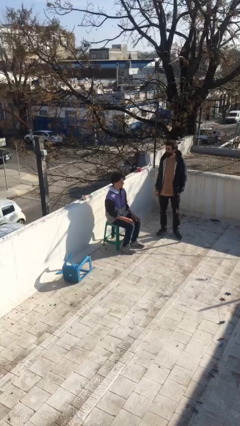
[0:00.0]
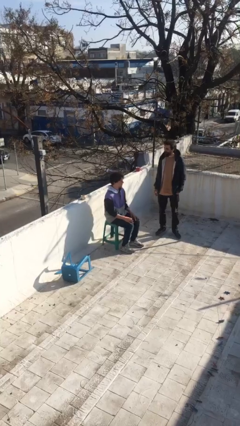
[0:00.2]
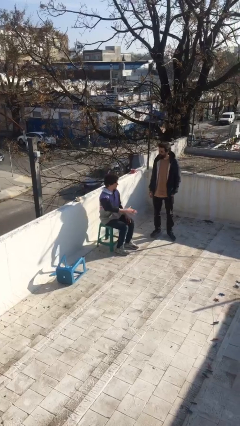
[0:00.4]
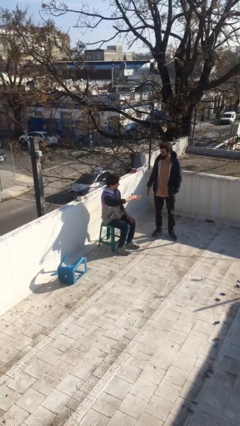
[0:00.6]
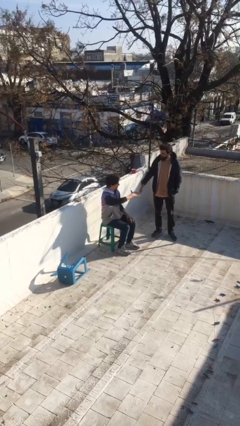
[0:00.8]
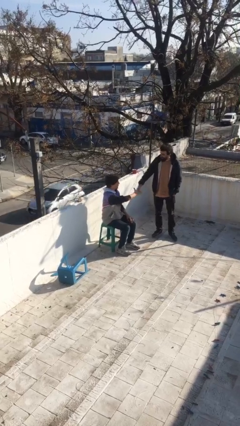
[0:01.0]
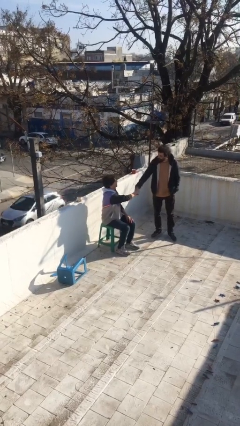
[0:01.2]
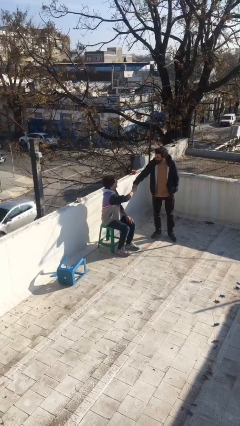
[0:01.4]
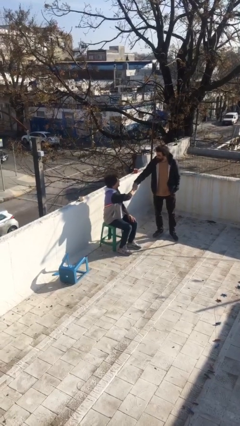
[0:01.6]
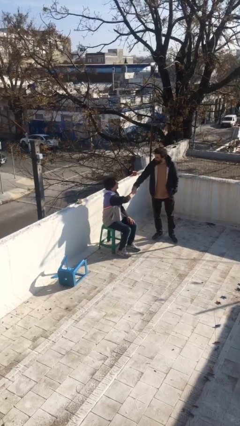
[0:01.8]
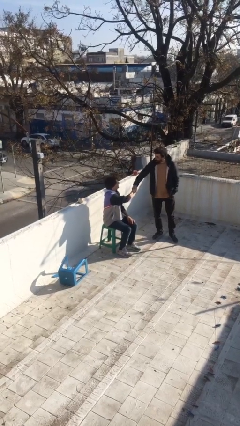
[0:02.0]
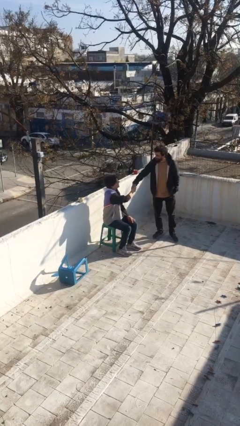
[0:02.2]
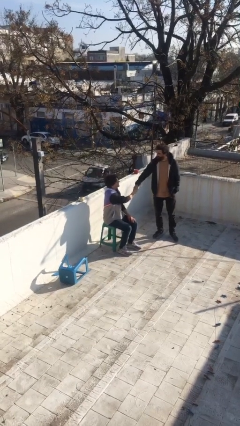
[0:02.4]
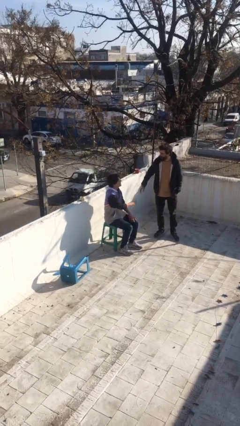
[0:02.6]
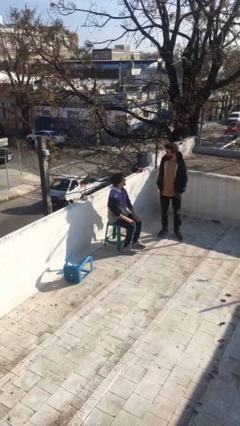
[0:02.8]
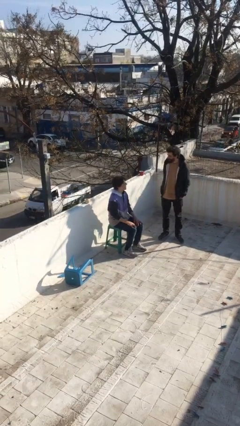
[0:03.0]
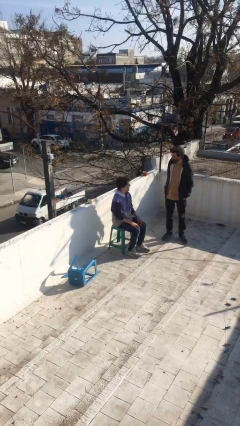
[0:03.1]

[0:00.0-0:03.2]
person shakes hand

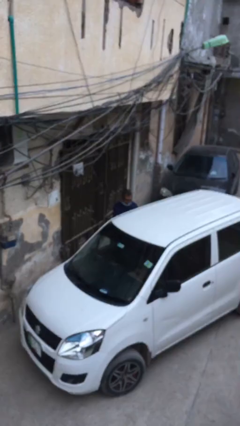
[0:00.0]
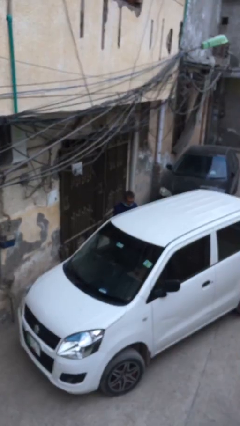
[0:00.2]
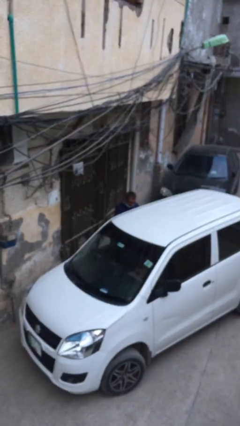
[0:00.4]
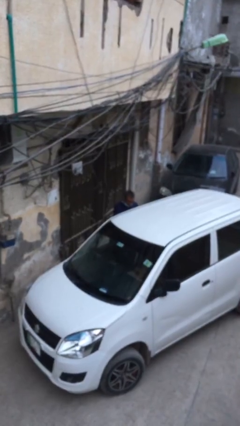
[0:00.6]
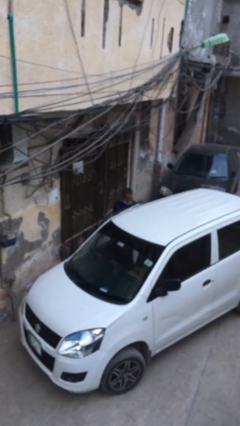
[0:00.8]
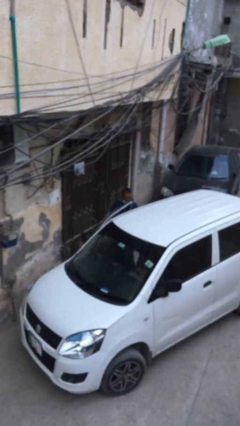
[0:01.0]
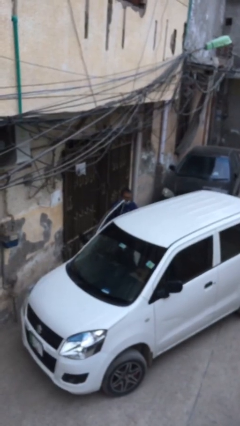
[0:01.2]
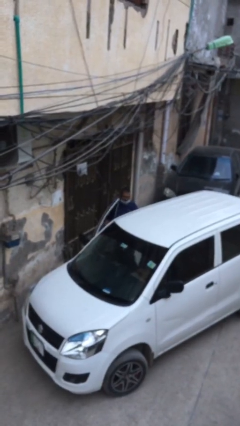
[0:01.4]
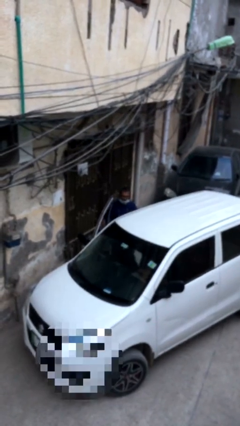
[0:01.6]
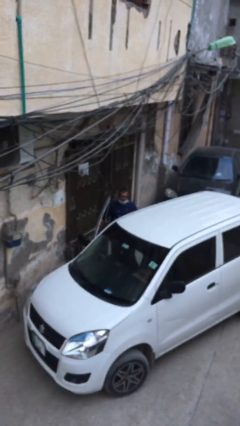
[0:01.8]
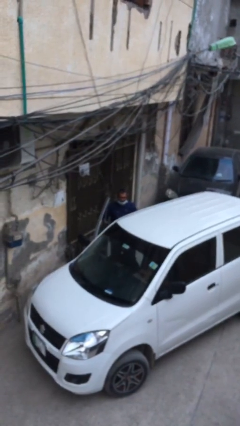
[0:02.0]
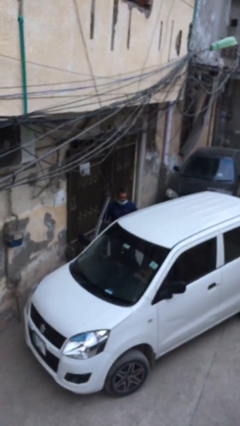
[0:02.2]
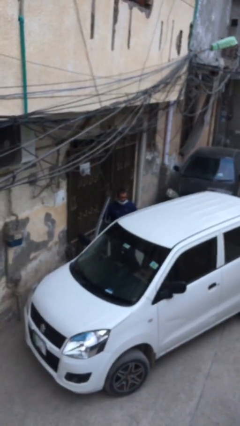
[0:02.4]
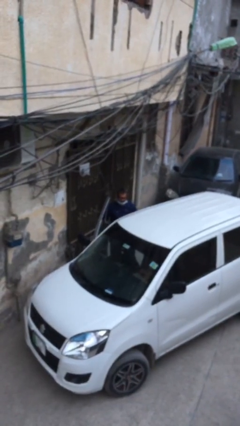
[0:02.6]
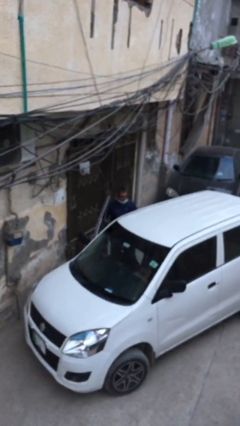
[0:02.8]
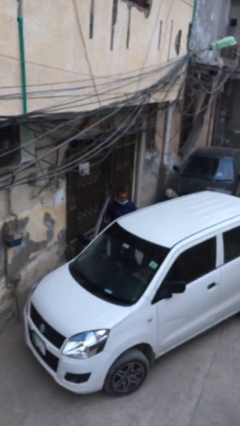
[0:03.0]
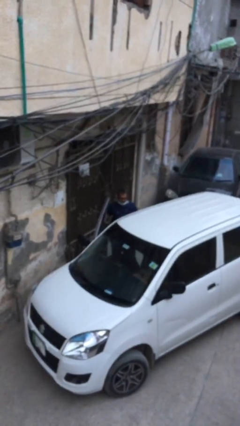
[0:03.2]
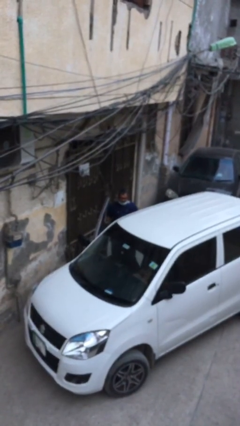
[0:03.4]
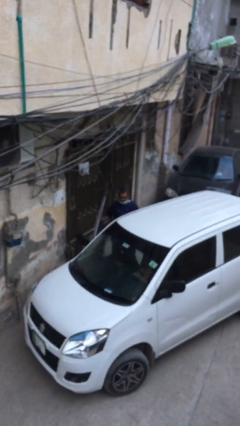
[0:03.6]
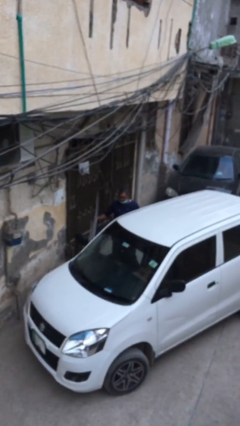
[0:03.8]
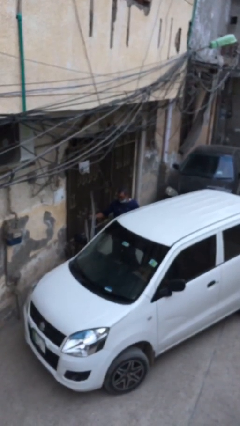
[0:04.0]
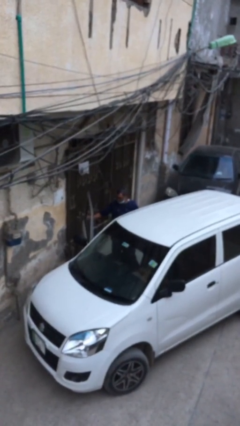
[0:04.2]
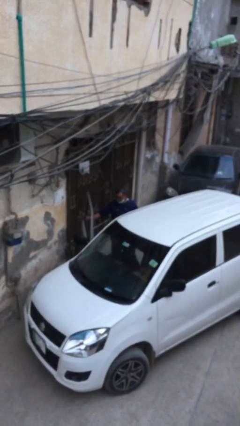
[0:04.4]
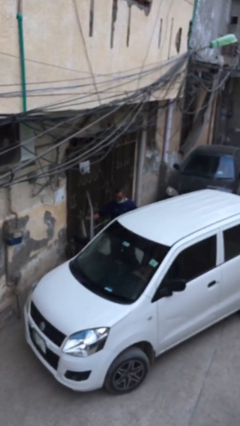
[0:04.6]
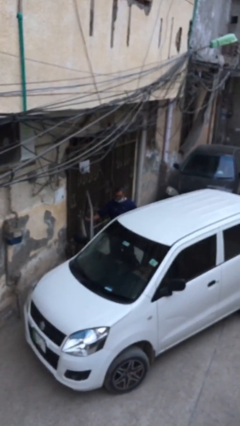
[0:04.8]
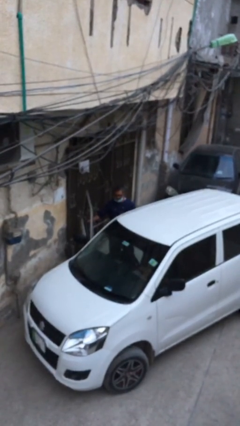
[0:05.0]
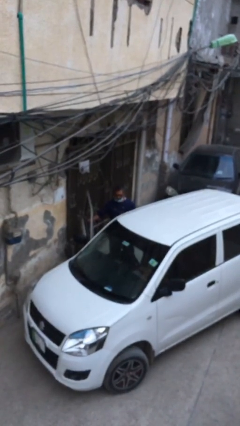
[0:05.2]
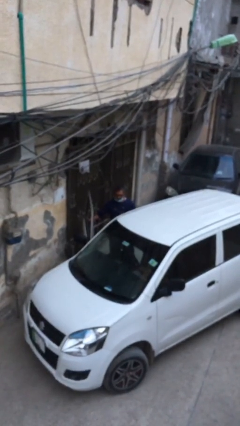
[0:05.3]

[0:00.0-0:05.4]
person opens car door

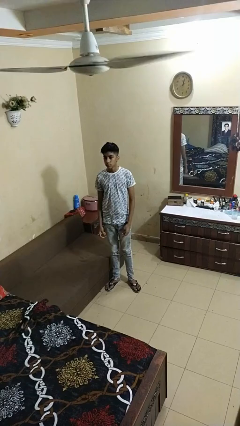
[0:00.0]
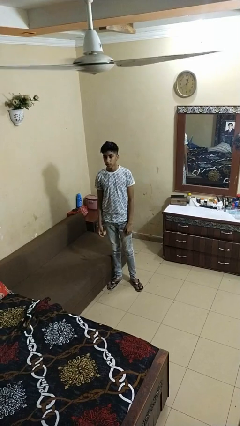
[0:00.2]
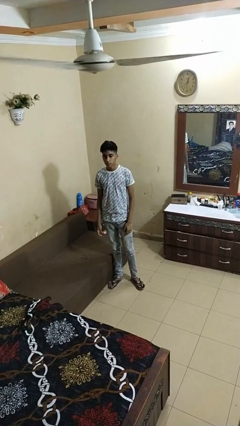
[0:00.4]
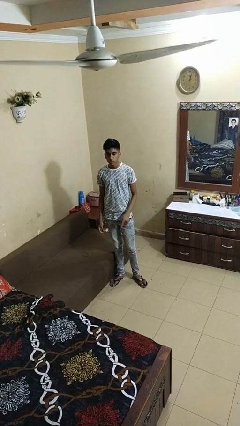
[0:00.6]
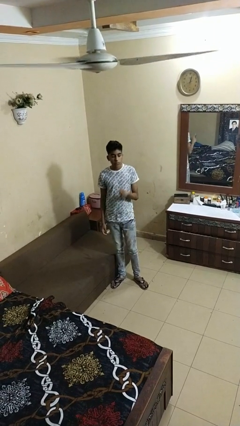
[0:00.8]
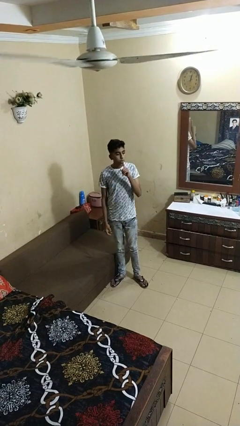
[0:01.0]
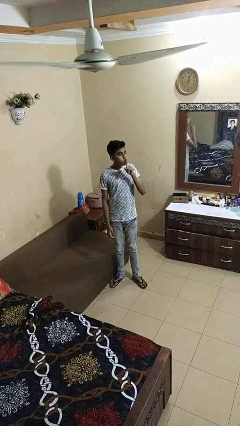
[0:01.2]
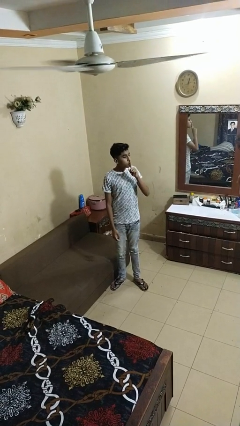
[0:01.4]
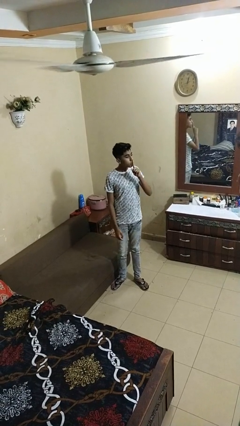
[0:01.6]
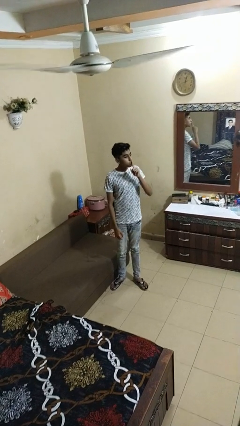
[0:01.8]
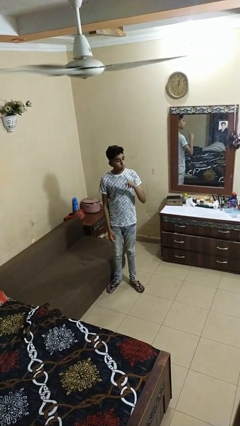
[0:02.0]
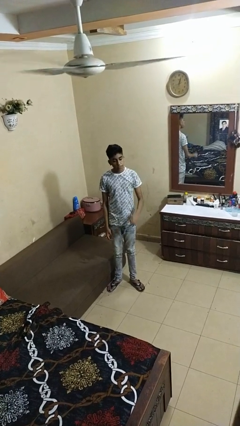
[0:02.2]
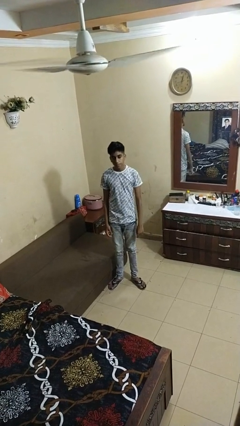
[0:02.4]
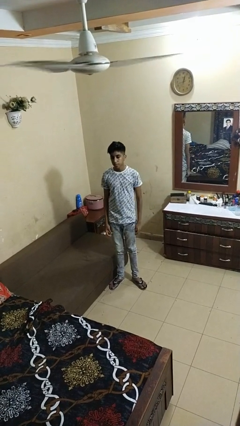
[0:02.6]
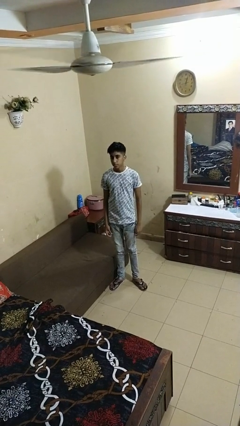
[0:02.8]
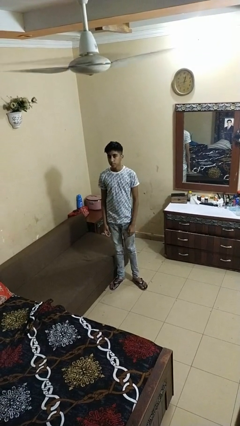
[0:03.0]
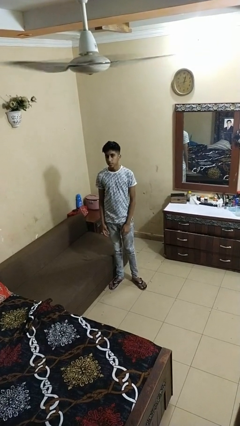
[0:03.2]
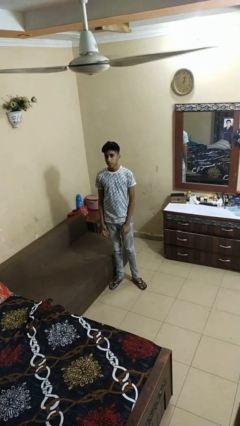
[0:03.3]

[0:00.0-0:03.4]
person gestures be quiet

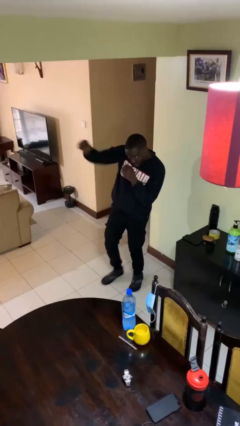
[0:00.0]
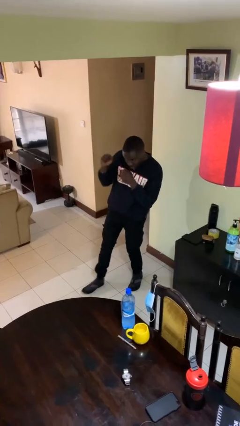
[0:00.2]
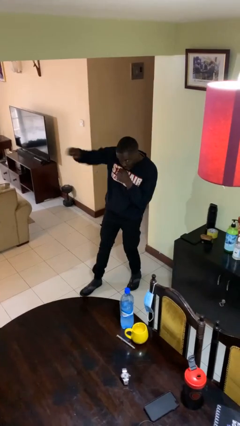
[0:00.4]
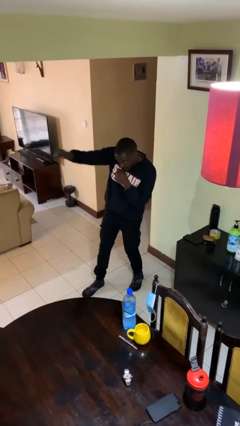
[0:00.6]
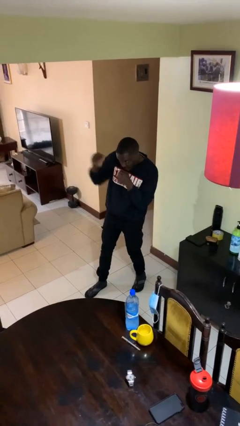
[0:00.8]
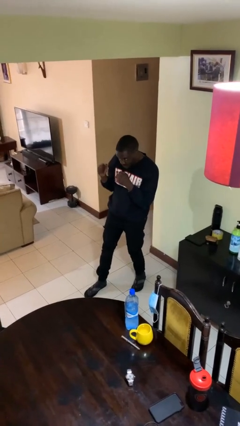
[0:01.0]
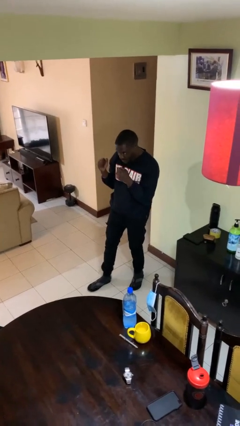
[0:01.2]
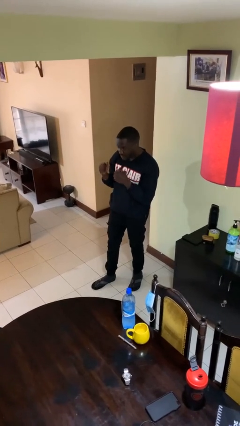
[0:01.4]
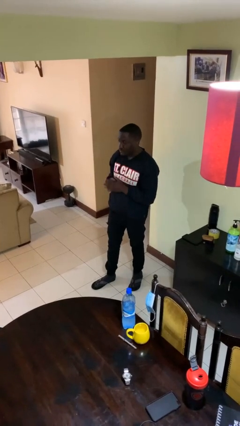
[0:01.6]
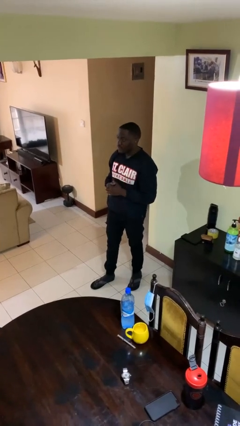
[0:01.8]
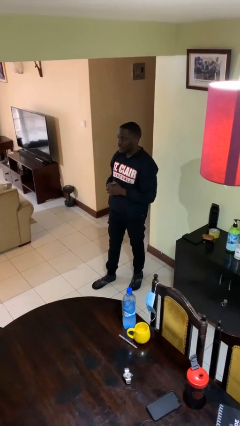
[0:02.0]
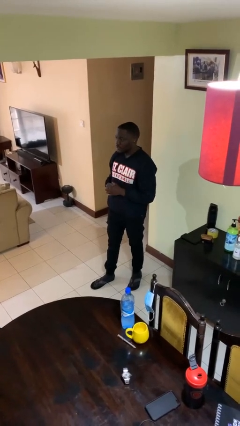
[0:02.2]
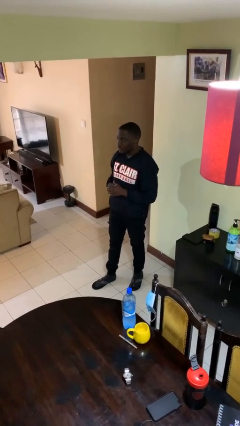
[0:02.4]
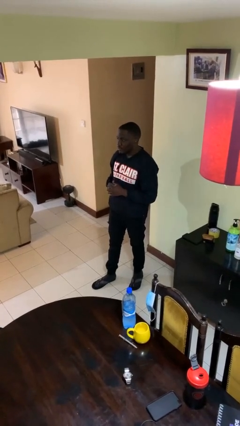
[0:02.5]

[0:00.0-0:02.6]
person punches

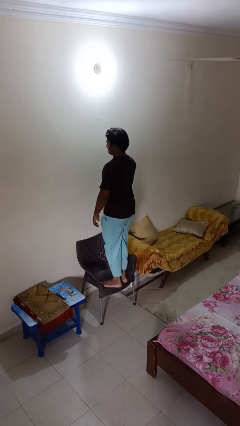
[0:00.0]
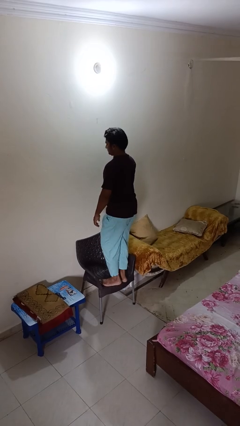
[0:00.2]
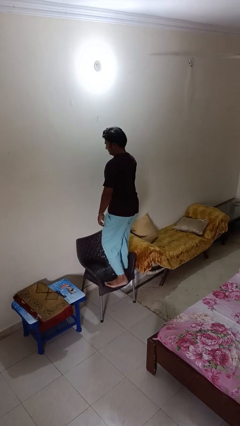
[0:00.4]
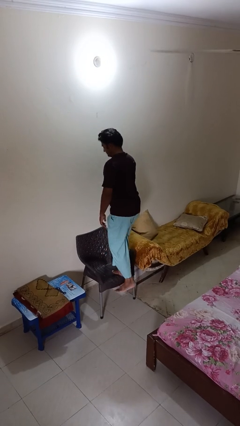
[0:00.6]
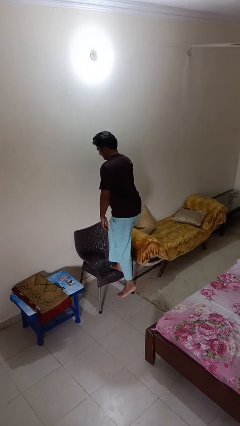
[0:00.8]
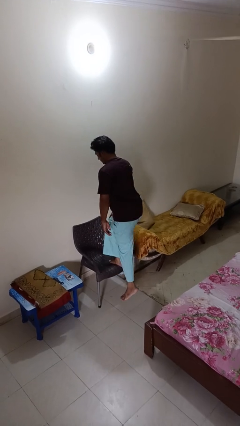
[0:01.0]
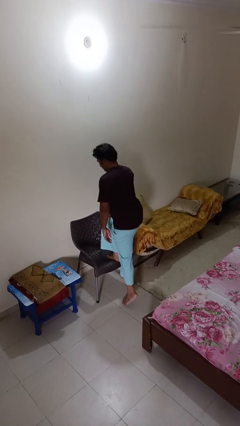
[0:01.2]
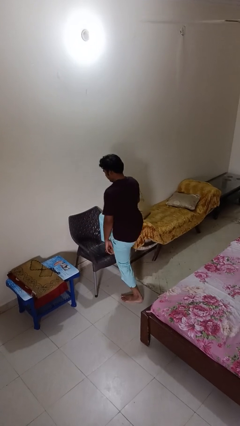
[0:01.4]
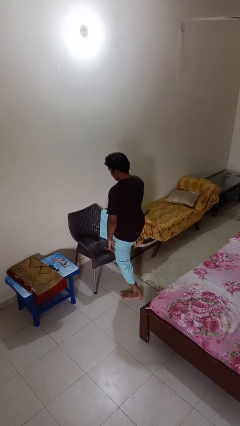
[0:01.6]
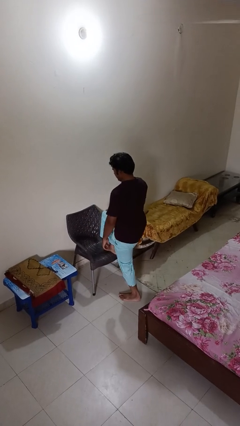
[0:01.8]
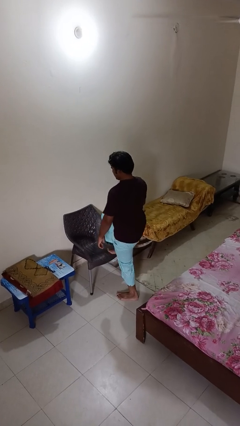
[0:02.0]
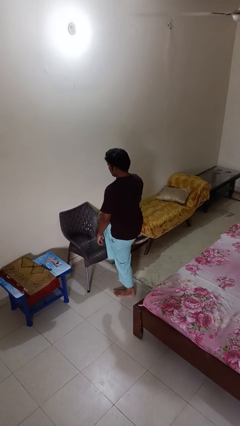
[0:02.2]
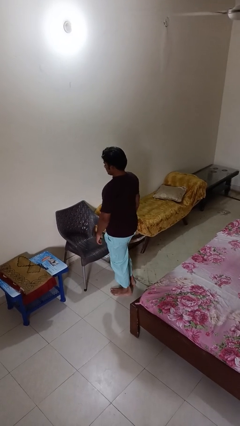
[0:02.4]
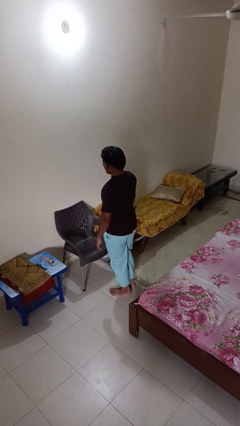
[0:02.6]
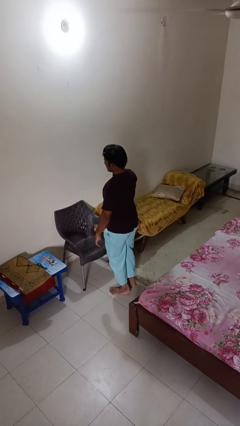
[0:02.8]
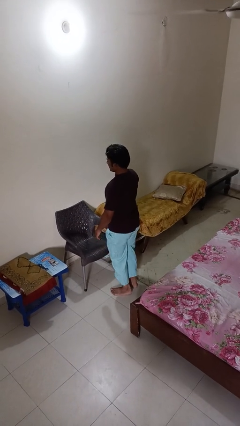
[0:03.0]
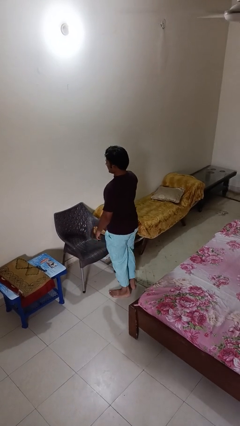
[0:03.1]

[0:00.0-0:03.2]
person climbs off chair
